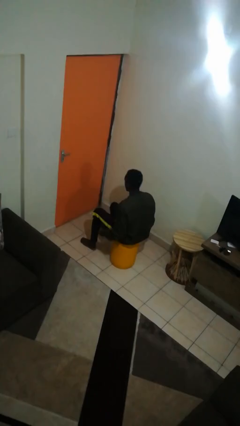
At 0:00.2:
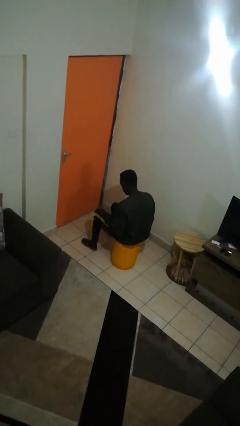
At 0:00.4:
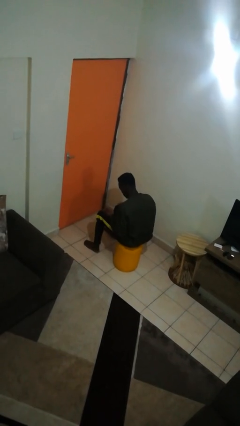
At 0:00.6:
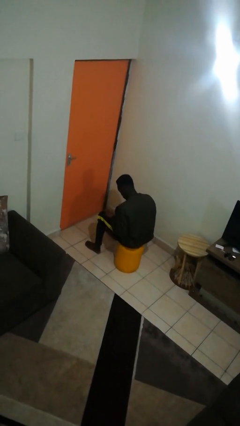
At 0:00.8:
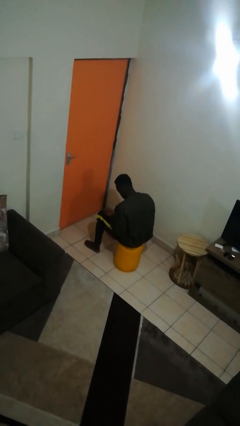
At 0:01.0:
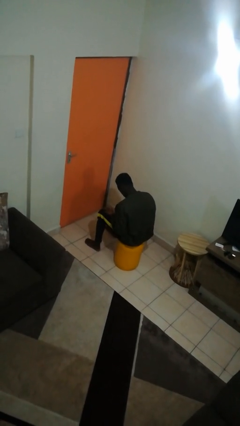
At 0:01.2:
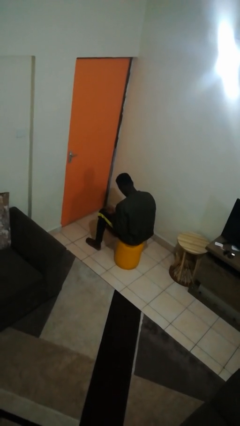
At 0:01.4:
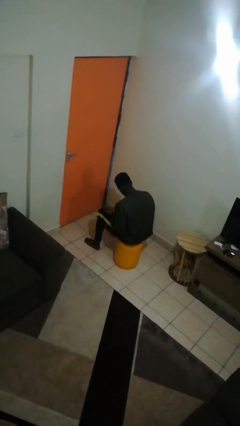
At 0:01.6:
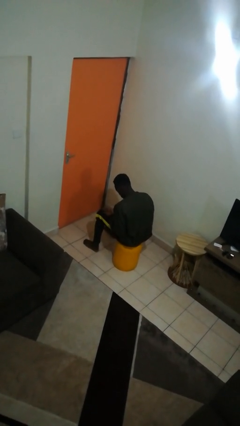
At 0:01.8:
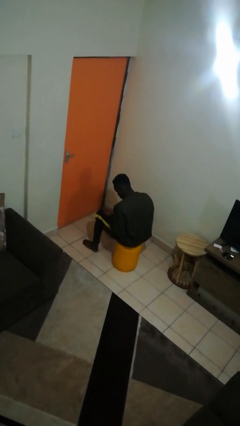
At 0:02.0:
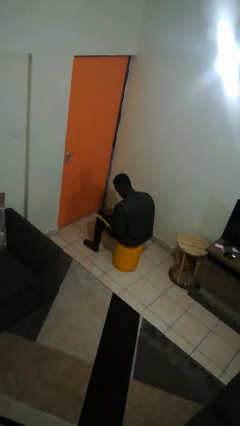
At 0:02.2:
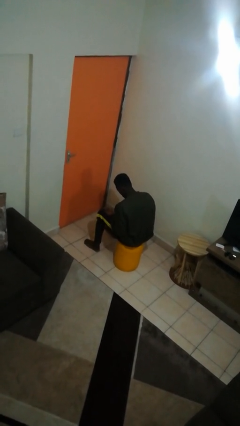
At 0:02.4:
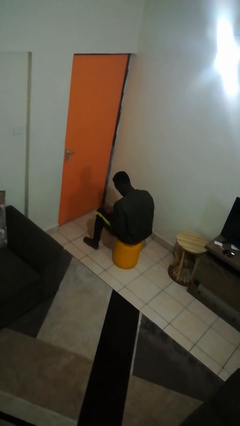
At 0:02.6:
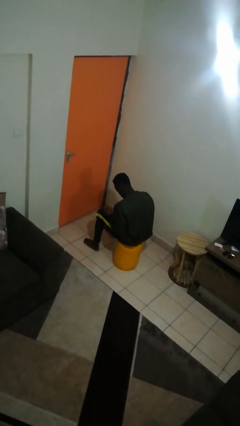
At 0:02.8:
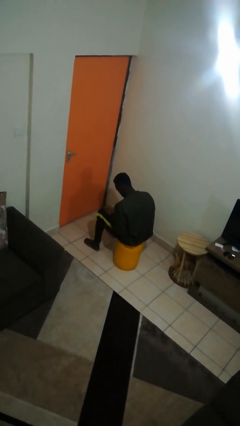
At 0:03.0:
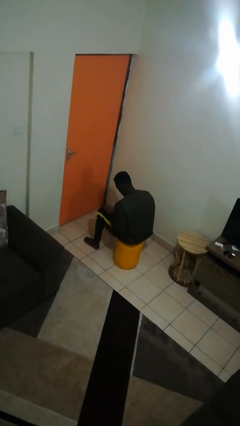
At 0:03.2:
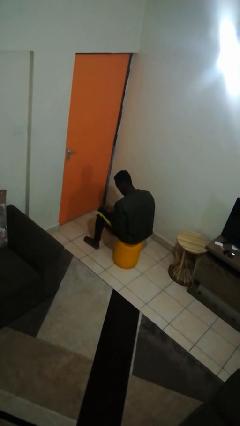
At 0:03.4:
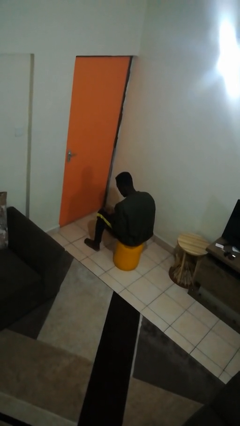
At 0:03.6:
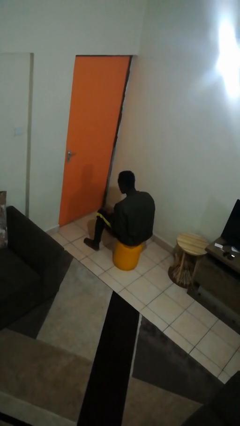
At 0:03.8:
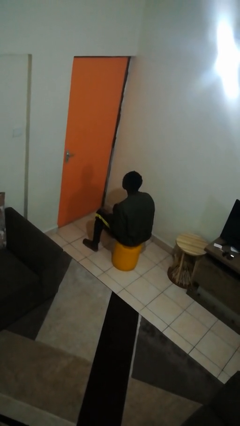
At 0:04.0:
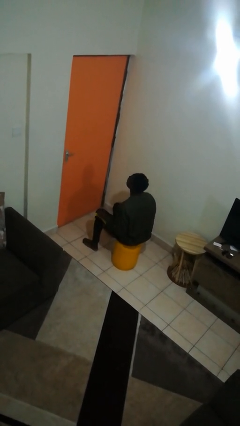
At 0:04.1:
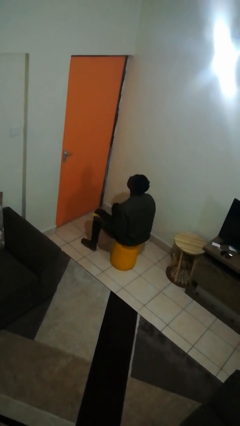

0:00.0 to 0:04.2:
person looks at hands in lap

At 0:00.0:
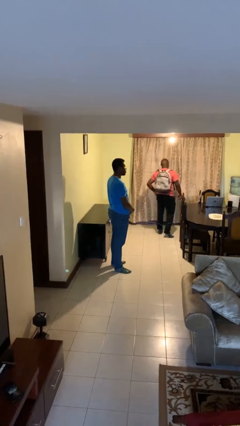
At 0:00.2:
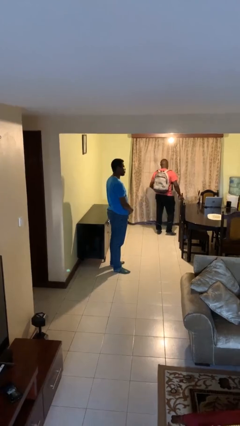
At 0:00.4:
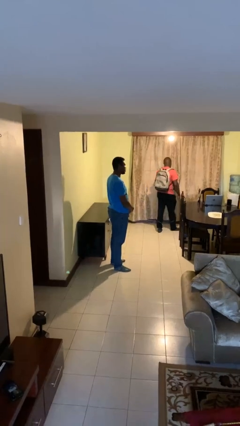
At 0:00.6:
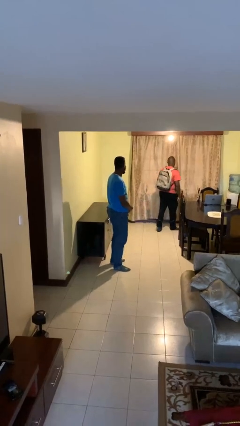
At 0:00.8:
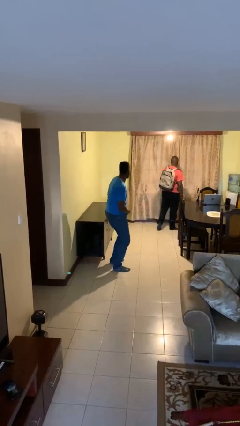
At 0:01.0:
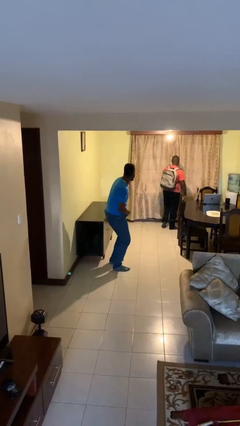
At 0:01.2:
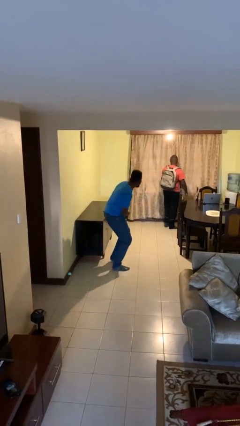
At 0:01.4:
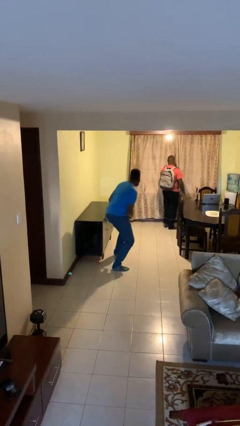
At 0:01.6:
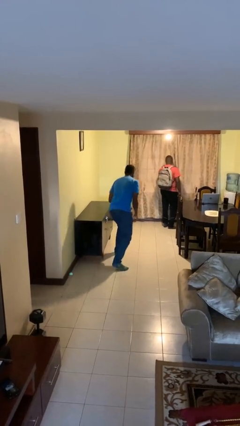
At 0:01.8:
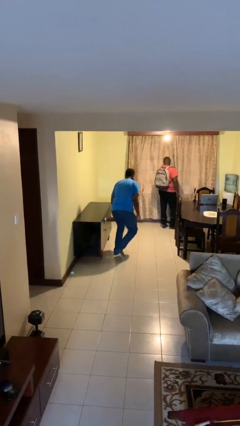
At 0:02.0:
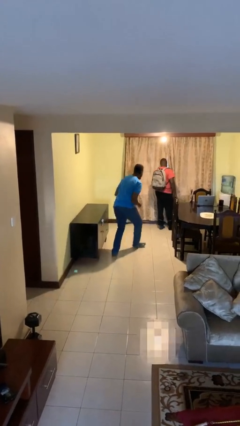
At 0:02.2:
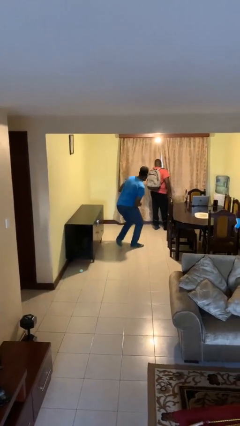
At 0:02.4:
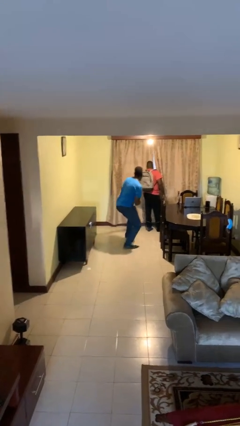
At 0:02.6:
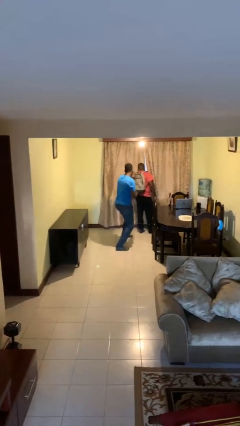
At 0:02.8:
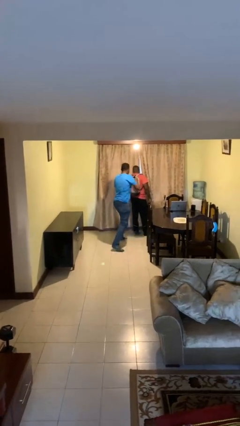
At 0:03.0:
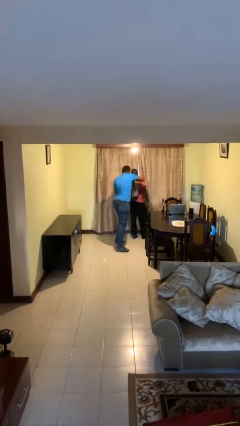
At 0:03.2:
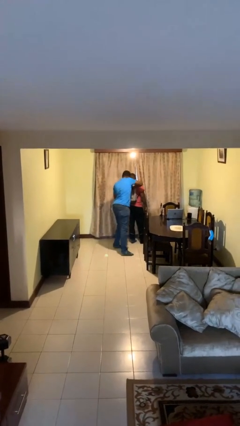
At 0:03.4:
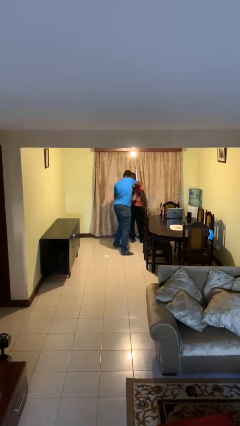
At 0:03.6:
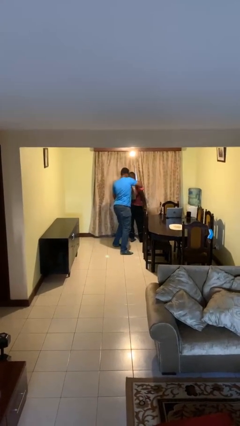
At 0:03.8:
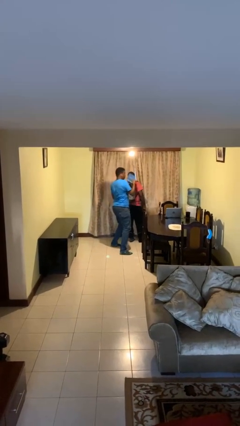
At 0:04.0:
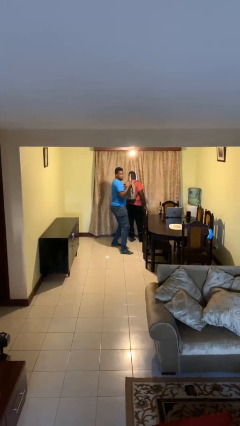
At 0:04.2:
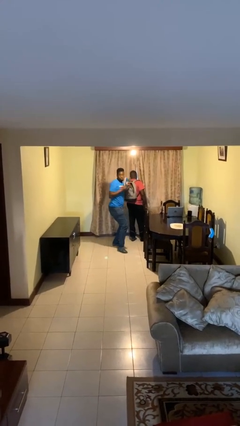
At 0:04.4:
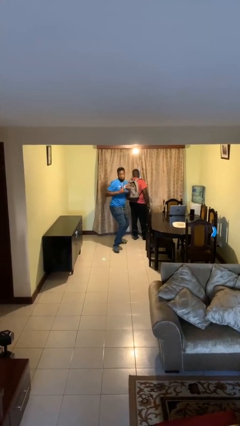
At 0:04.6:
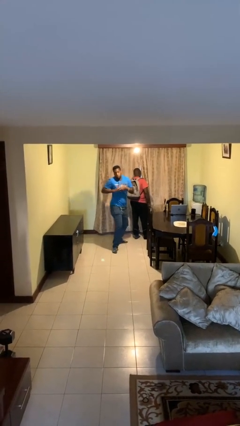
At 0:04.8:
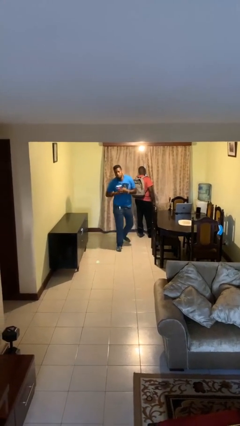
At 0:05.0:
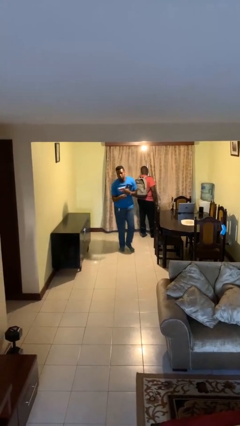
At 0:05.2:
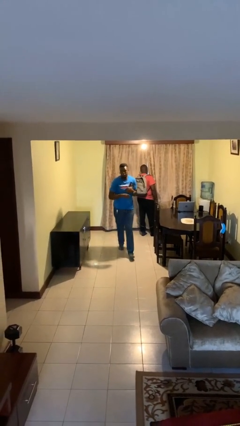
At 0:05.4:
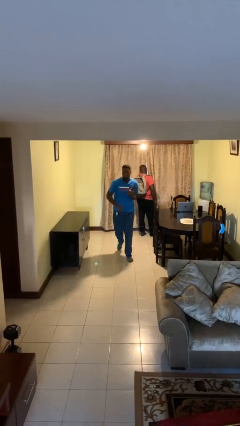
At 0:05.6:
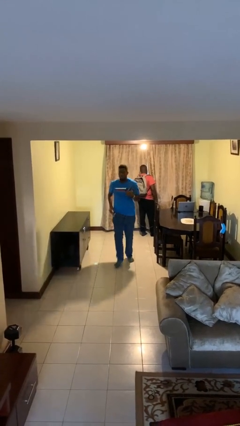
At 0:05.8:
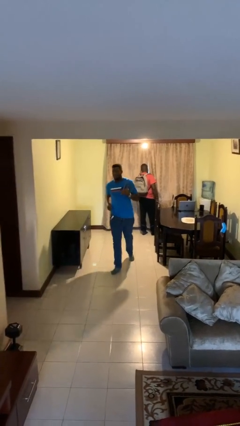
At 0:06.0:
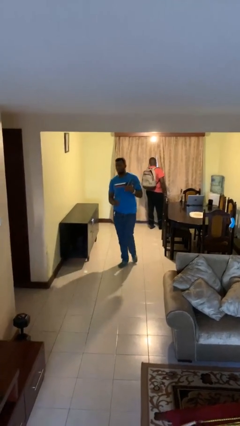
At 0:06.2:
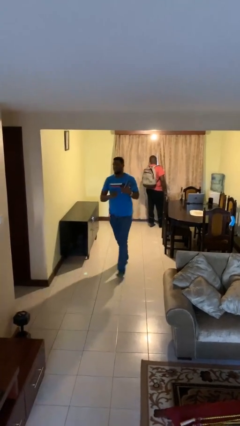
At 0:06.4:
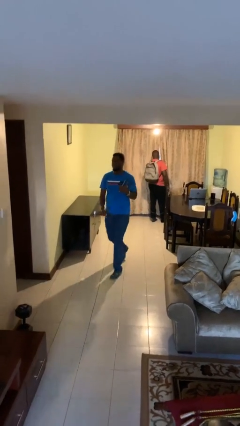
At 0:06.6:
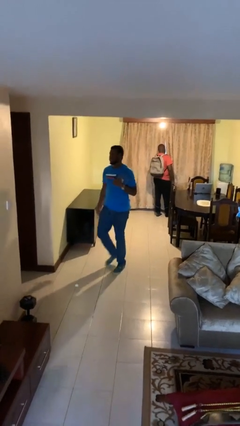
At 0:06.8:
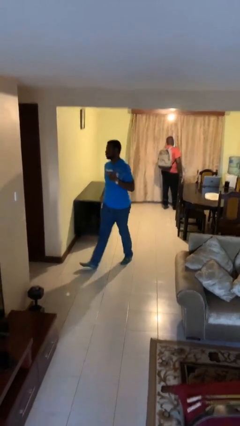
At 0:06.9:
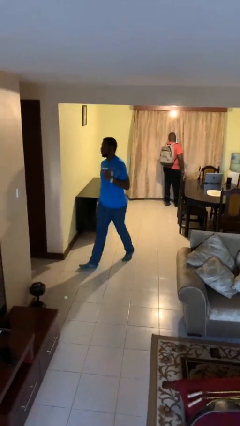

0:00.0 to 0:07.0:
person steals object from person

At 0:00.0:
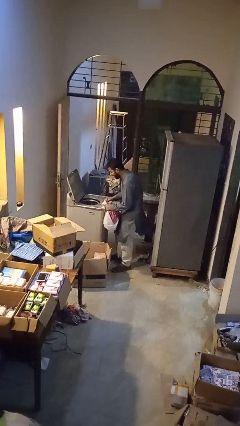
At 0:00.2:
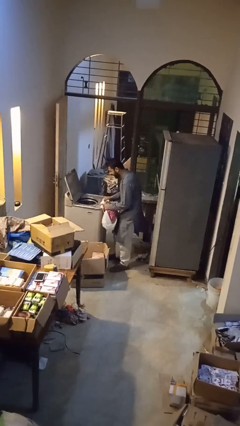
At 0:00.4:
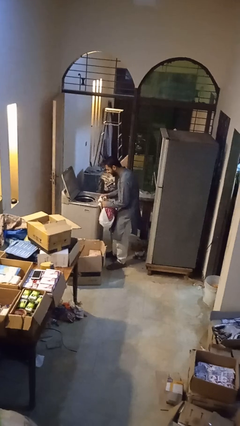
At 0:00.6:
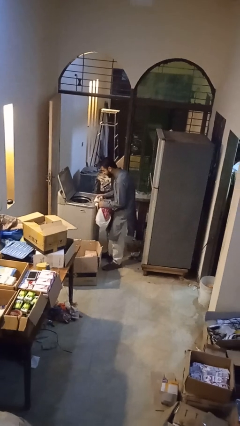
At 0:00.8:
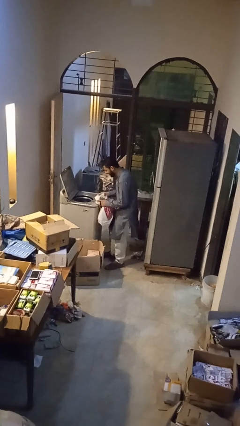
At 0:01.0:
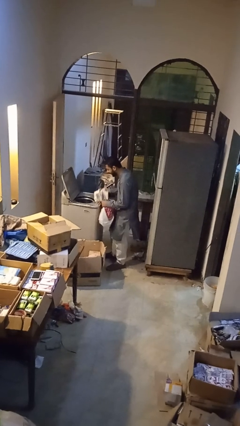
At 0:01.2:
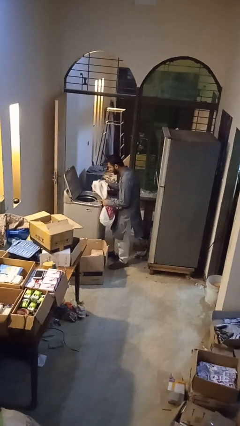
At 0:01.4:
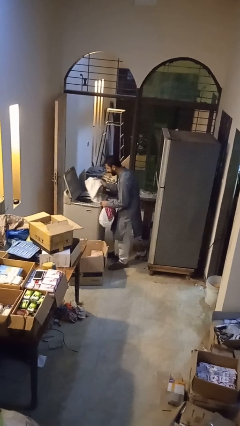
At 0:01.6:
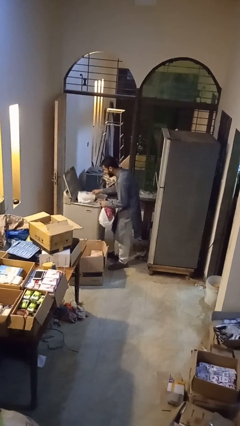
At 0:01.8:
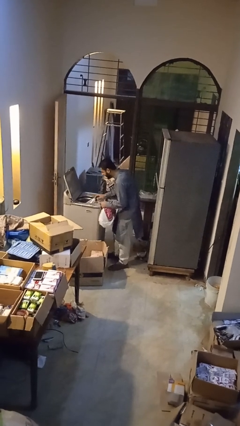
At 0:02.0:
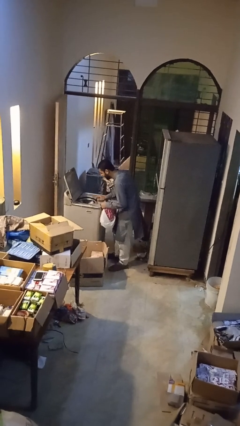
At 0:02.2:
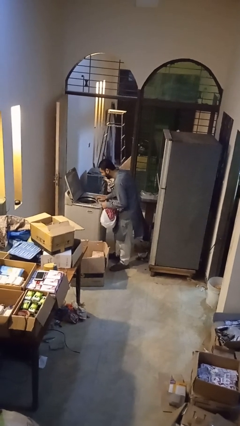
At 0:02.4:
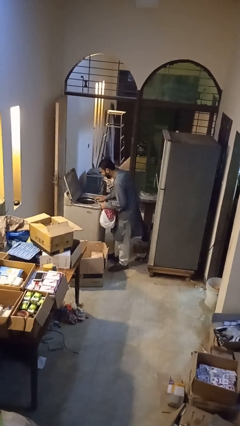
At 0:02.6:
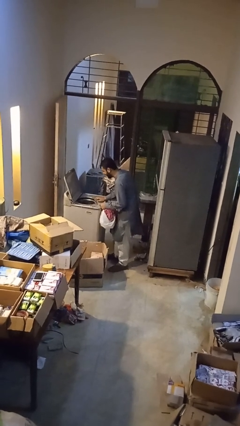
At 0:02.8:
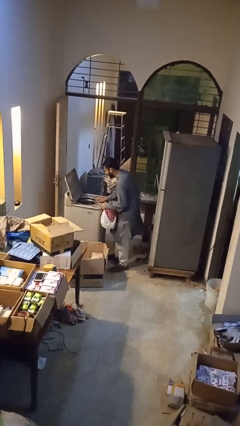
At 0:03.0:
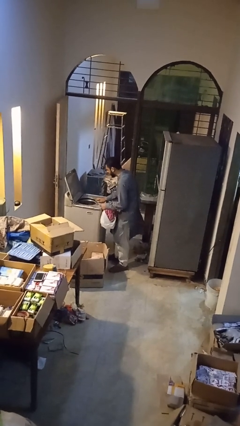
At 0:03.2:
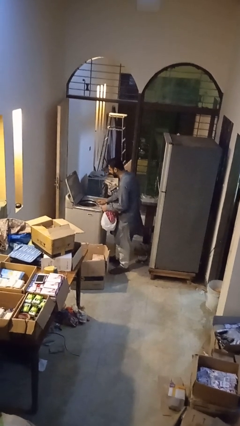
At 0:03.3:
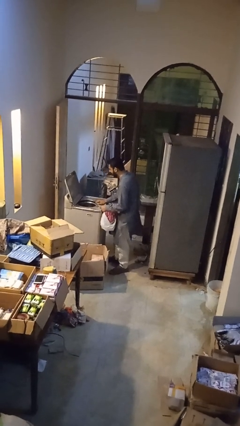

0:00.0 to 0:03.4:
person loads dryer

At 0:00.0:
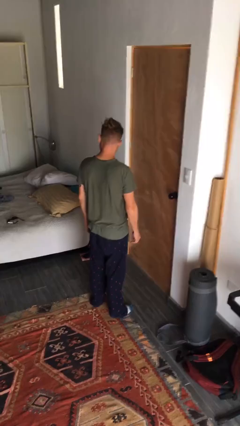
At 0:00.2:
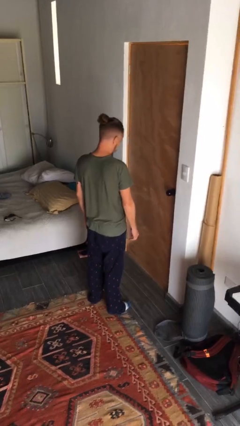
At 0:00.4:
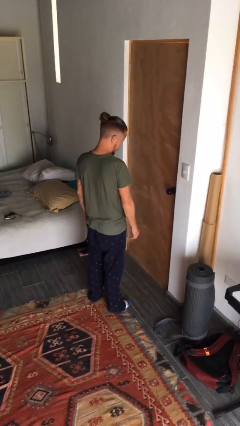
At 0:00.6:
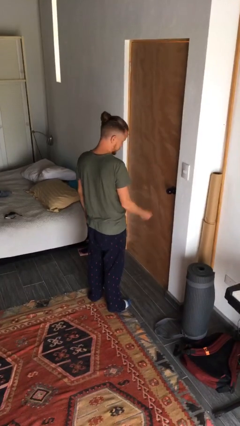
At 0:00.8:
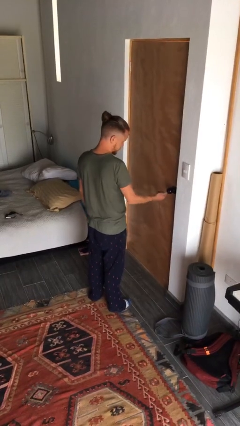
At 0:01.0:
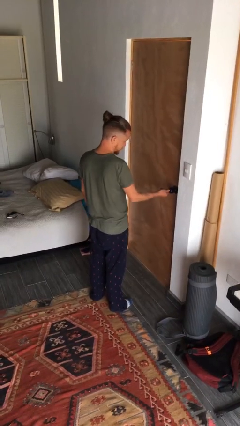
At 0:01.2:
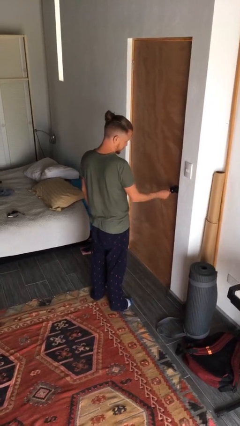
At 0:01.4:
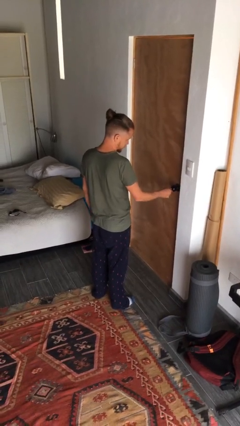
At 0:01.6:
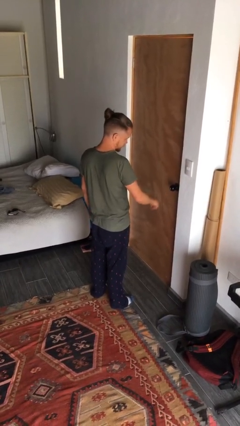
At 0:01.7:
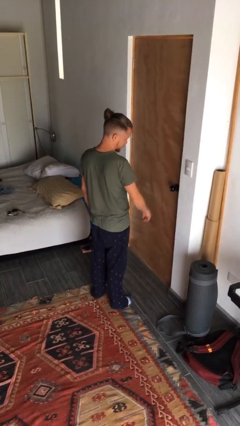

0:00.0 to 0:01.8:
person unlocks door with keys

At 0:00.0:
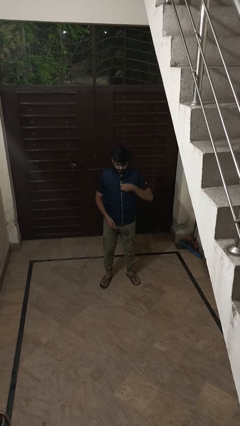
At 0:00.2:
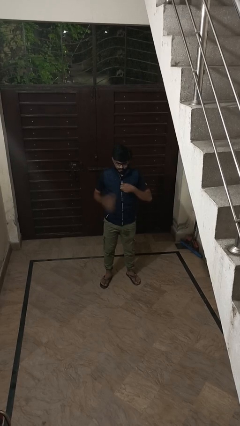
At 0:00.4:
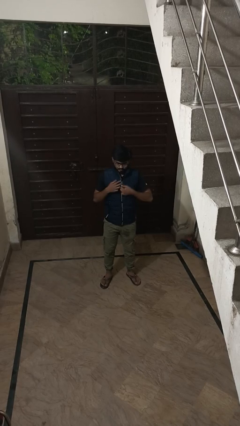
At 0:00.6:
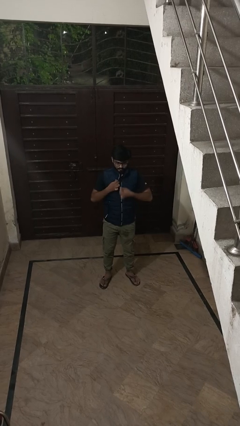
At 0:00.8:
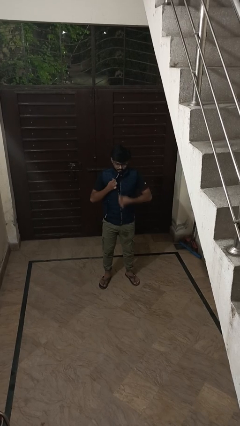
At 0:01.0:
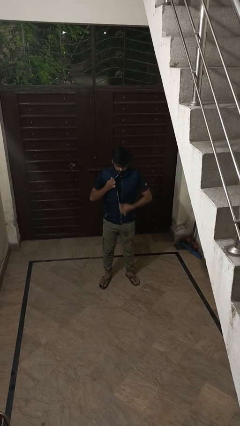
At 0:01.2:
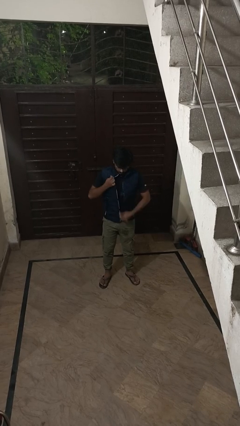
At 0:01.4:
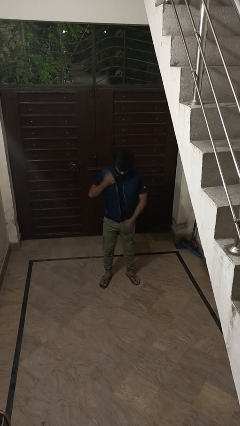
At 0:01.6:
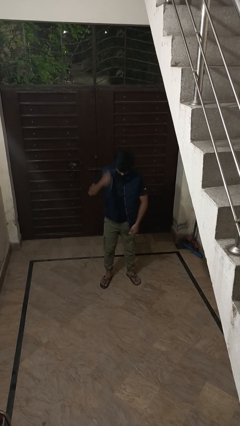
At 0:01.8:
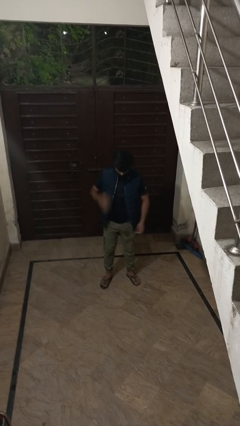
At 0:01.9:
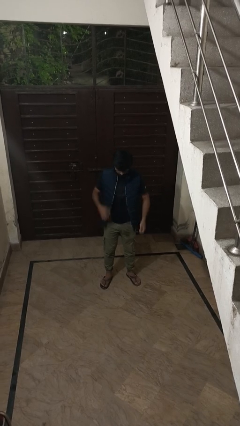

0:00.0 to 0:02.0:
person unzips jacket
